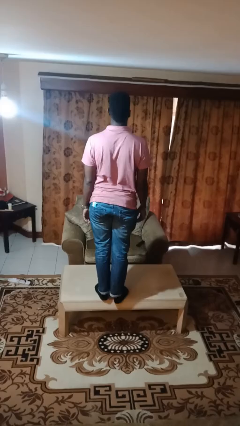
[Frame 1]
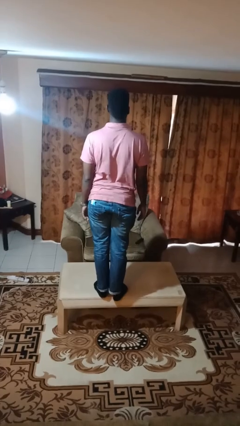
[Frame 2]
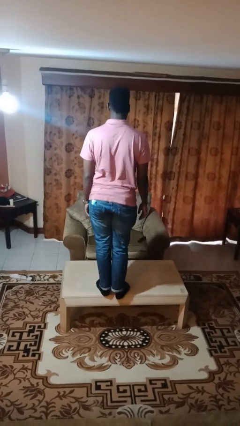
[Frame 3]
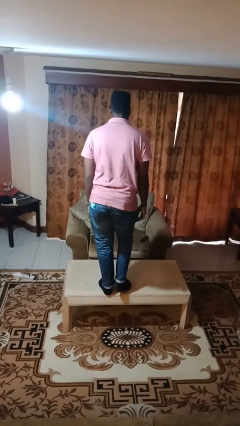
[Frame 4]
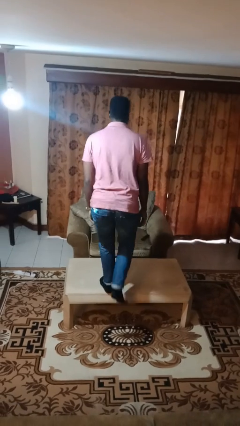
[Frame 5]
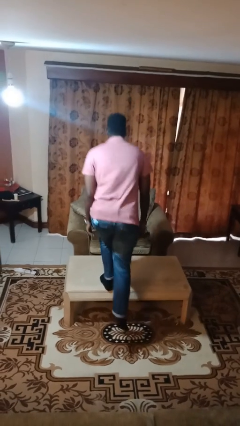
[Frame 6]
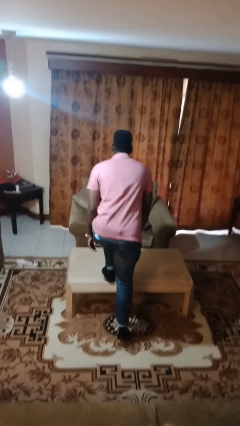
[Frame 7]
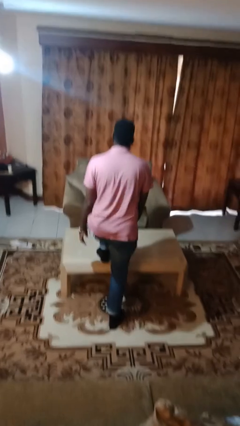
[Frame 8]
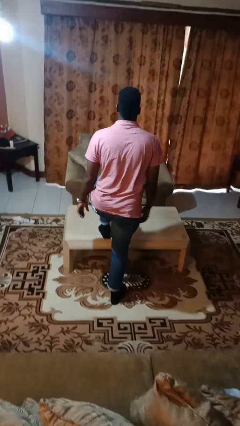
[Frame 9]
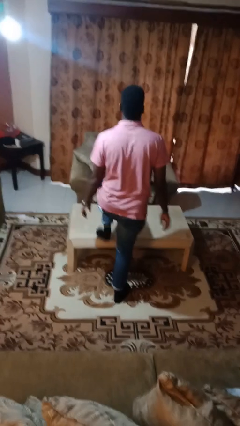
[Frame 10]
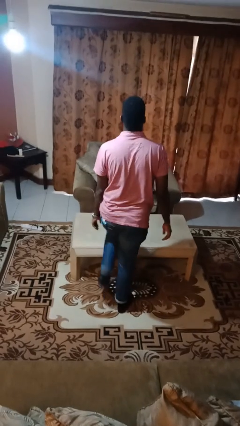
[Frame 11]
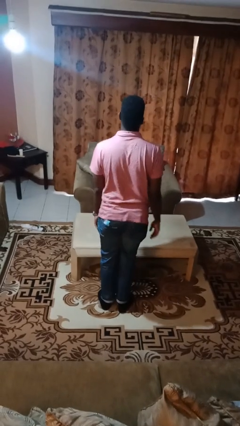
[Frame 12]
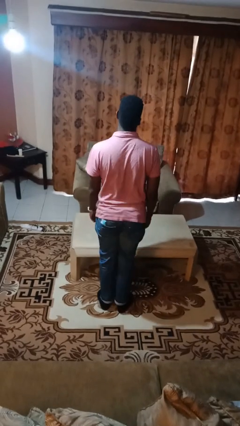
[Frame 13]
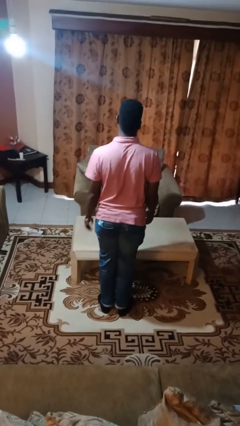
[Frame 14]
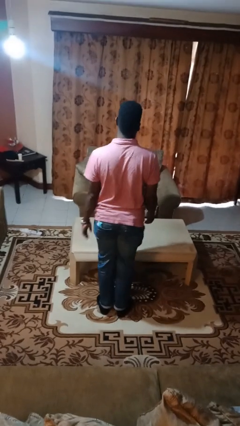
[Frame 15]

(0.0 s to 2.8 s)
person climbs off table

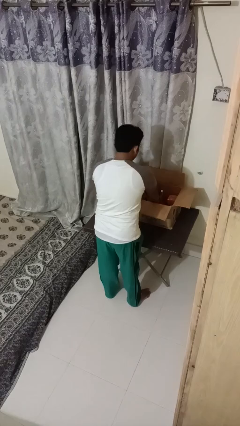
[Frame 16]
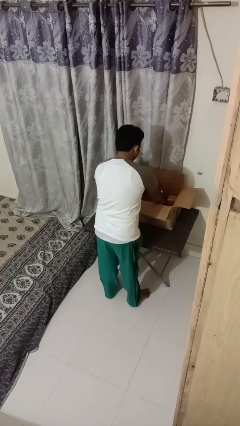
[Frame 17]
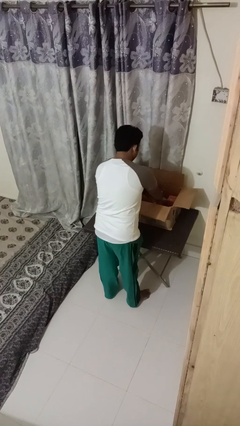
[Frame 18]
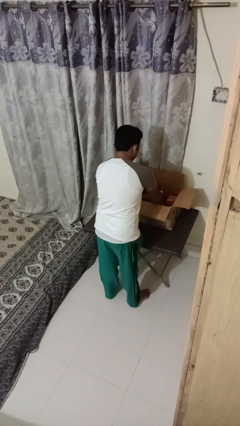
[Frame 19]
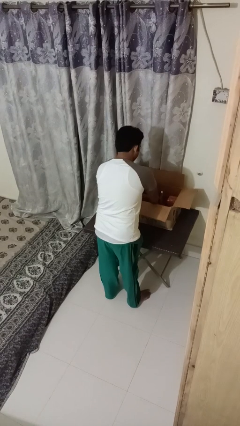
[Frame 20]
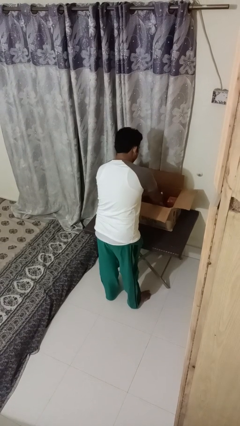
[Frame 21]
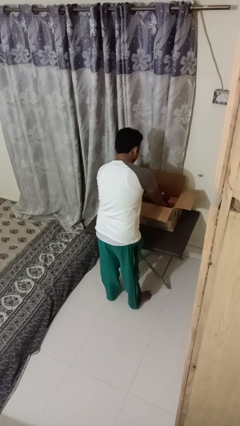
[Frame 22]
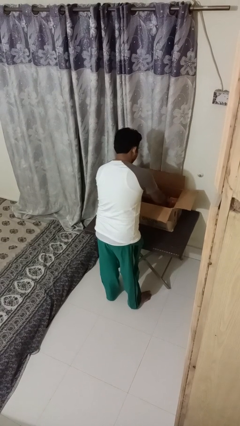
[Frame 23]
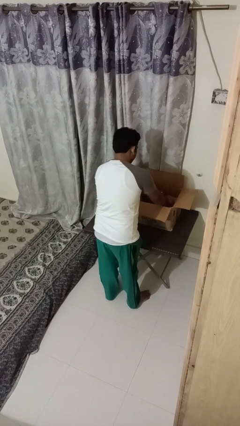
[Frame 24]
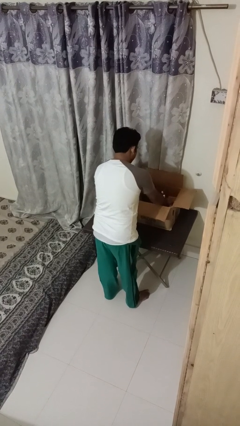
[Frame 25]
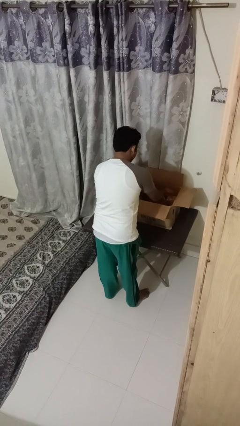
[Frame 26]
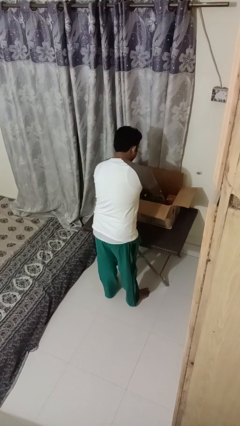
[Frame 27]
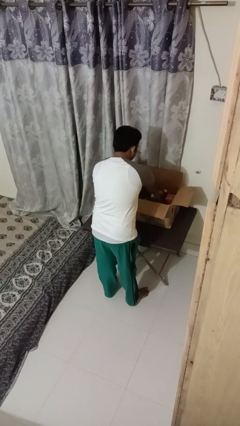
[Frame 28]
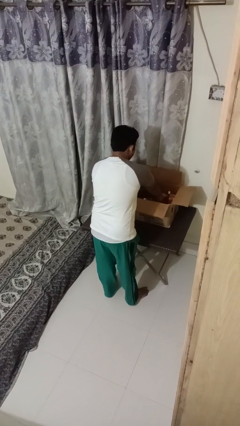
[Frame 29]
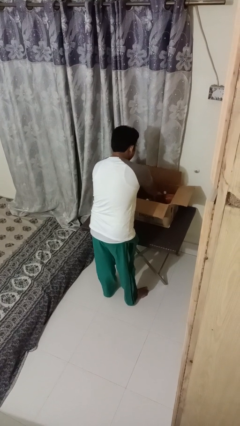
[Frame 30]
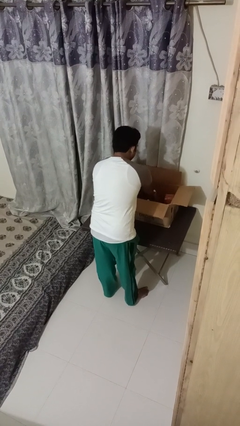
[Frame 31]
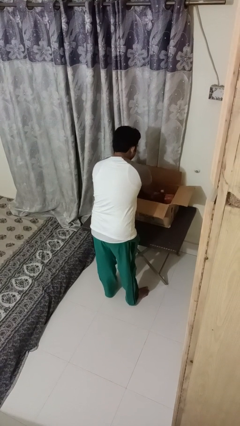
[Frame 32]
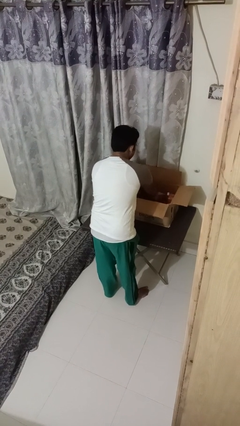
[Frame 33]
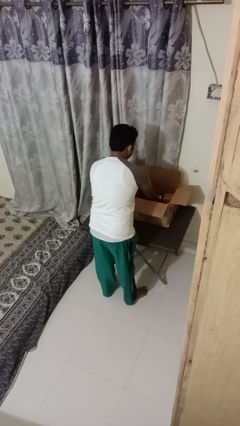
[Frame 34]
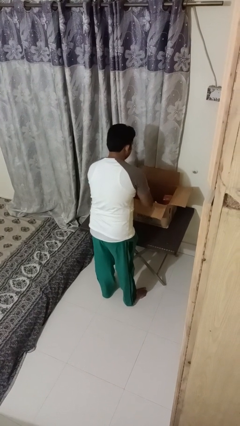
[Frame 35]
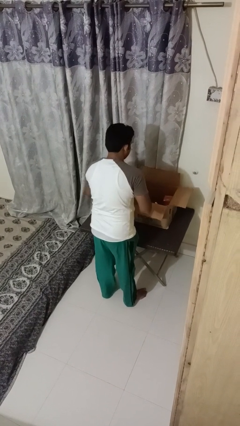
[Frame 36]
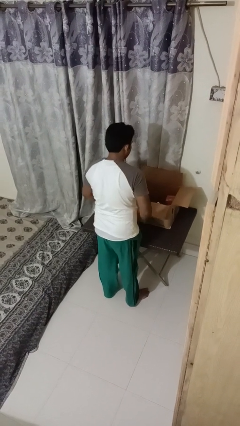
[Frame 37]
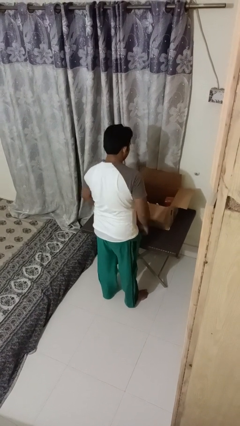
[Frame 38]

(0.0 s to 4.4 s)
person searches in box

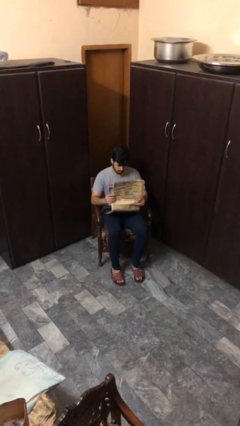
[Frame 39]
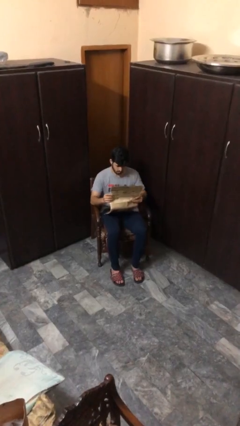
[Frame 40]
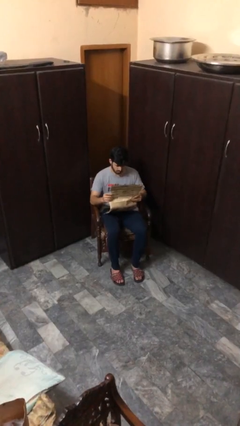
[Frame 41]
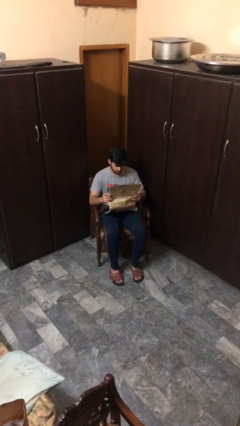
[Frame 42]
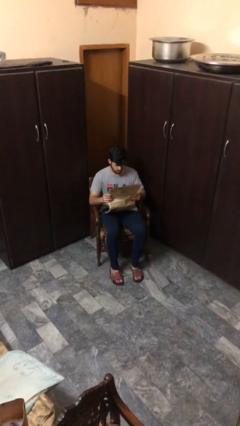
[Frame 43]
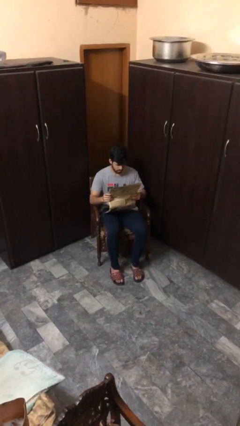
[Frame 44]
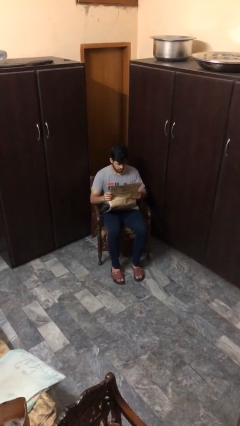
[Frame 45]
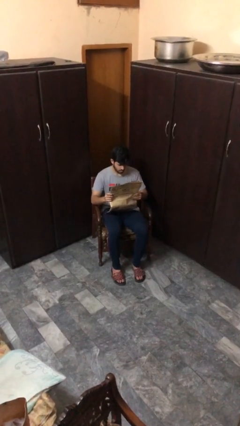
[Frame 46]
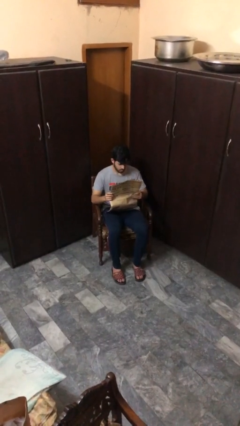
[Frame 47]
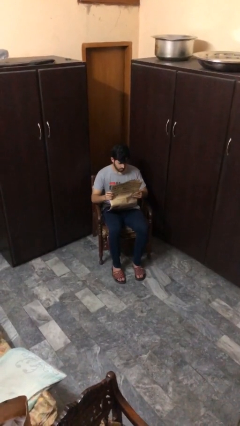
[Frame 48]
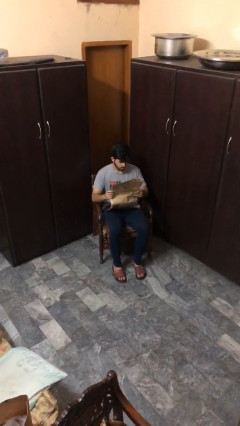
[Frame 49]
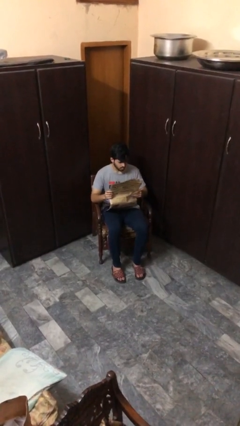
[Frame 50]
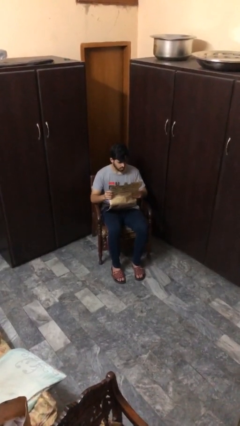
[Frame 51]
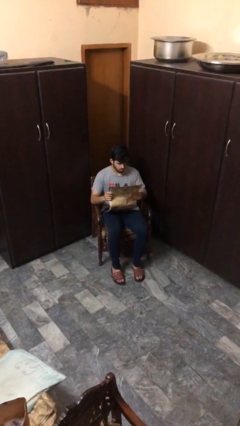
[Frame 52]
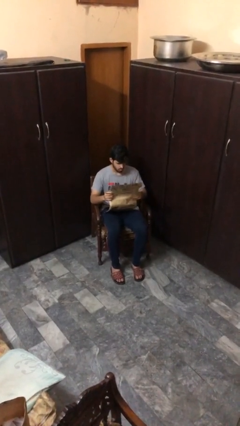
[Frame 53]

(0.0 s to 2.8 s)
person reads newspaper

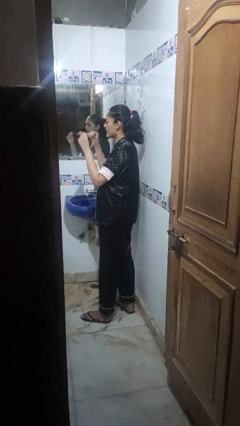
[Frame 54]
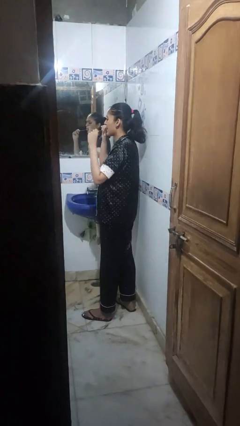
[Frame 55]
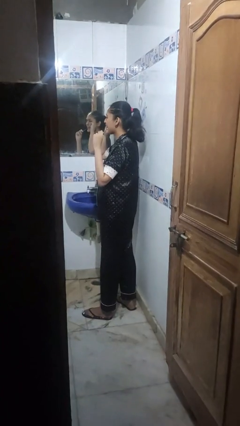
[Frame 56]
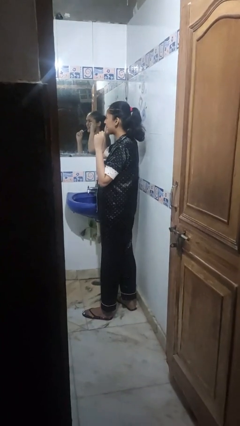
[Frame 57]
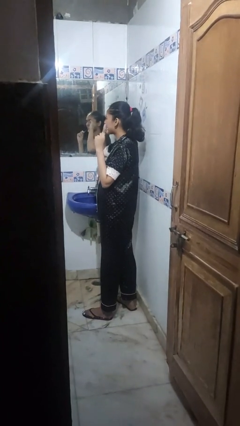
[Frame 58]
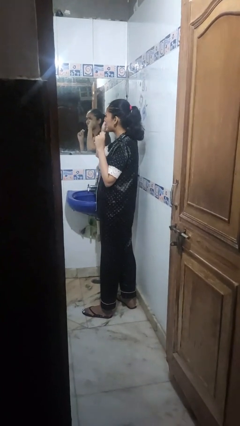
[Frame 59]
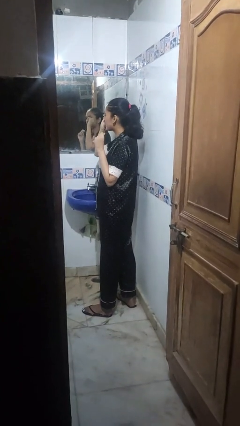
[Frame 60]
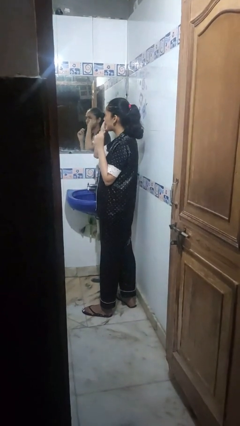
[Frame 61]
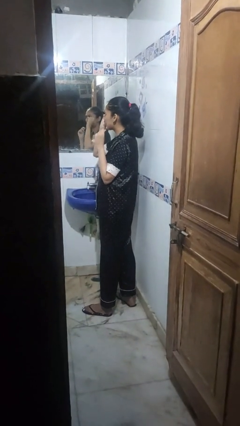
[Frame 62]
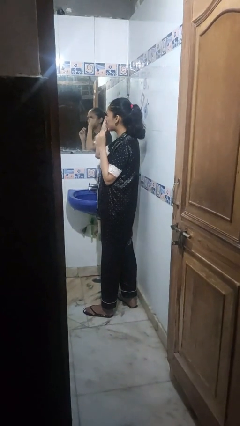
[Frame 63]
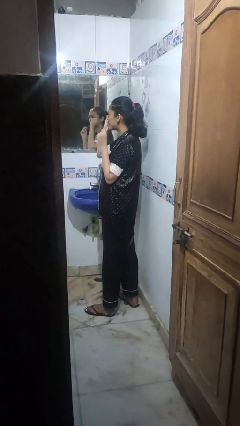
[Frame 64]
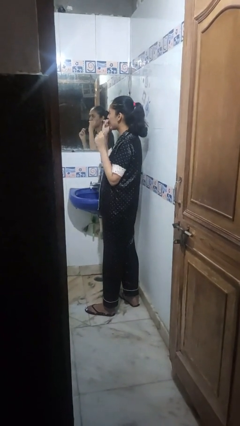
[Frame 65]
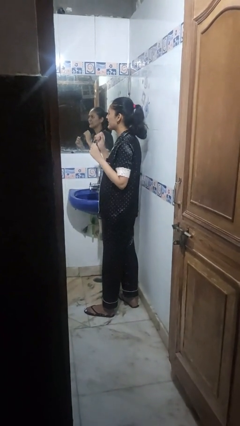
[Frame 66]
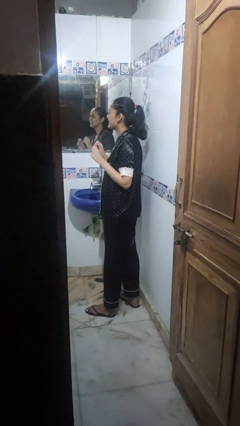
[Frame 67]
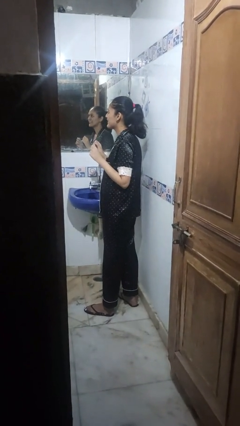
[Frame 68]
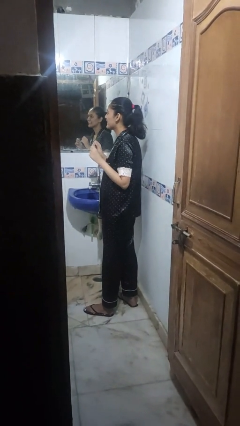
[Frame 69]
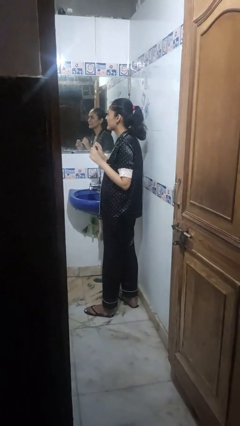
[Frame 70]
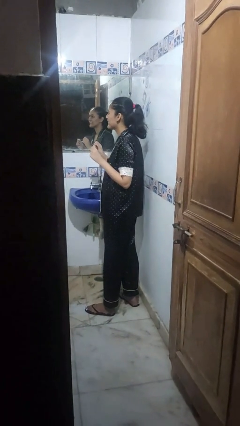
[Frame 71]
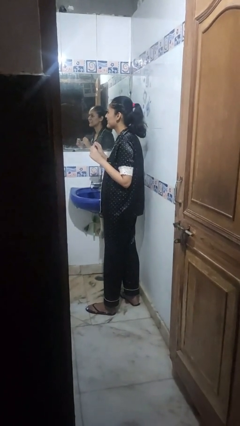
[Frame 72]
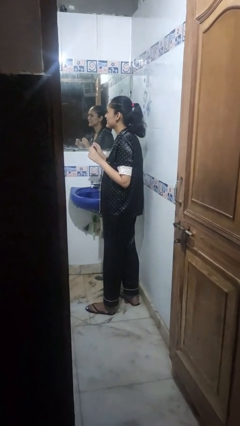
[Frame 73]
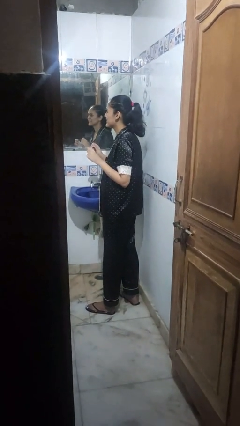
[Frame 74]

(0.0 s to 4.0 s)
person flosses

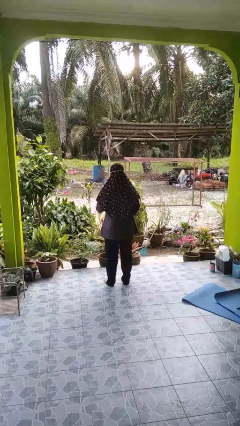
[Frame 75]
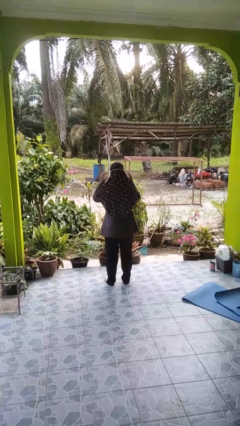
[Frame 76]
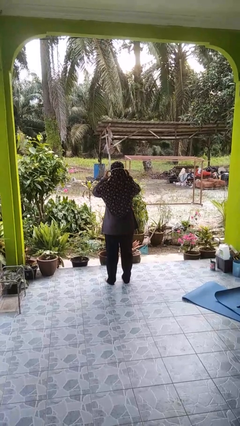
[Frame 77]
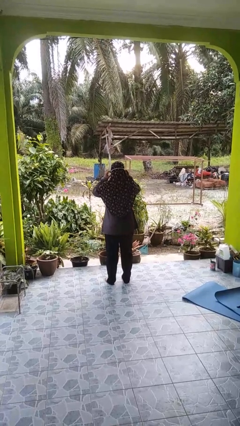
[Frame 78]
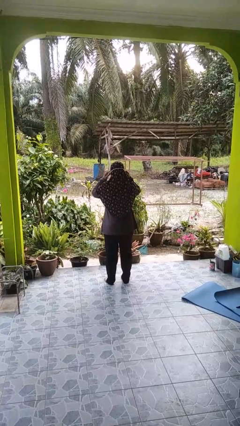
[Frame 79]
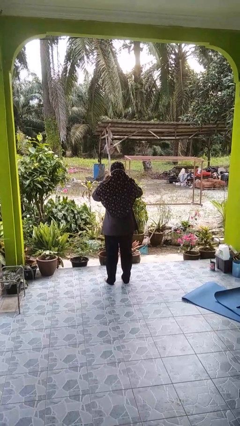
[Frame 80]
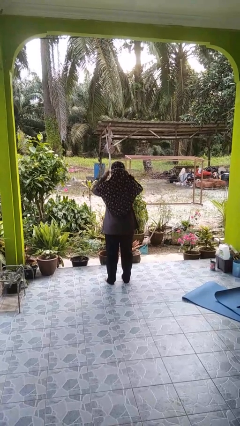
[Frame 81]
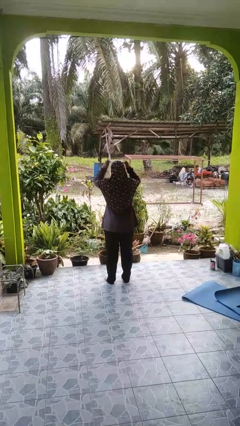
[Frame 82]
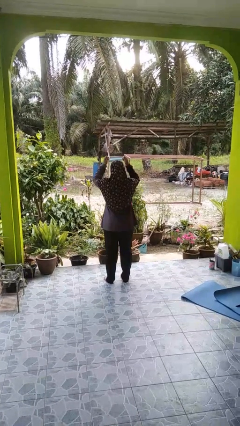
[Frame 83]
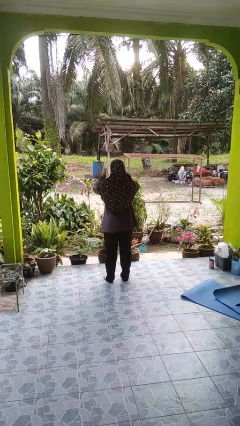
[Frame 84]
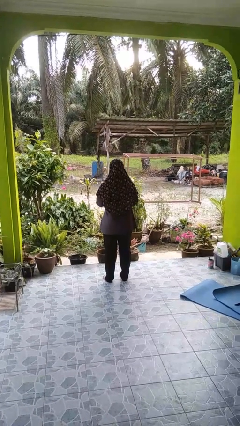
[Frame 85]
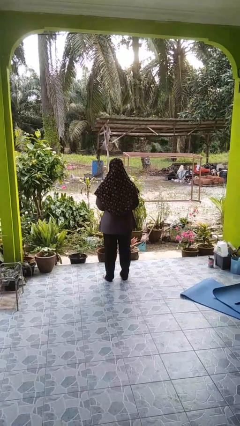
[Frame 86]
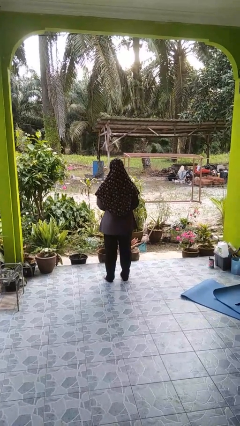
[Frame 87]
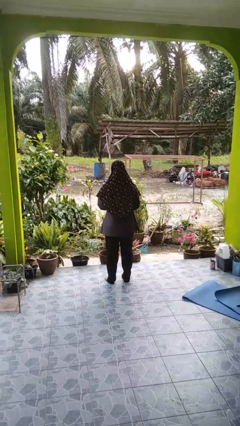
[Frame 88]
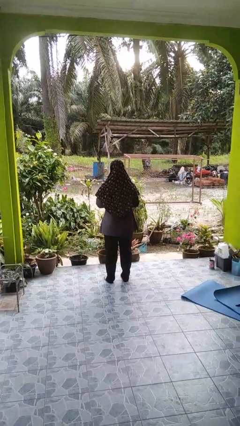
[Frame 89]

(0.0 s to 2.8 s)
person takes off facemask

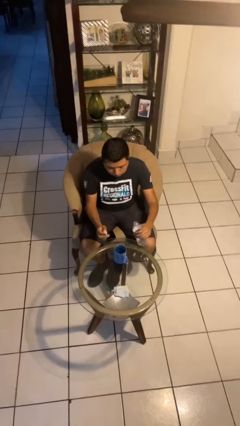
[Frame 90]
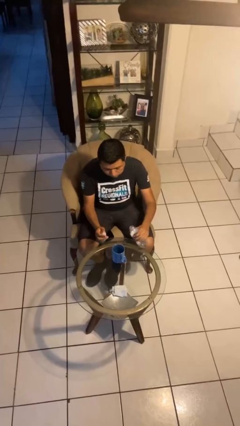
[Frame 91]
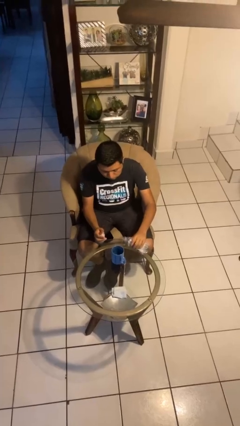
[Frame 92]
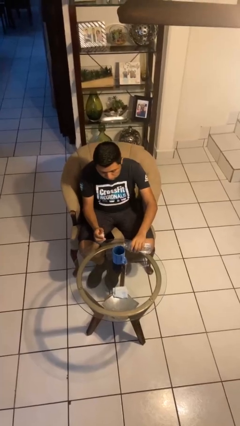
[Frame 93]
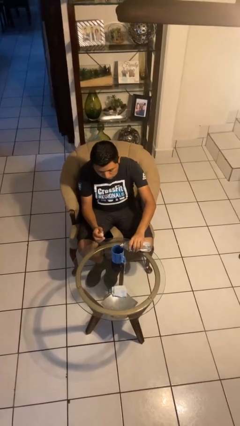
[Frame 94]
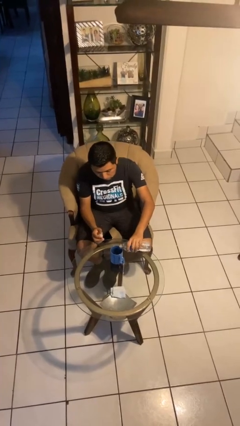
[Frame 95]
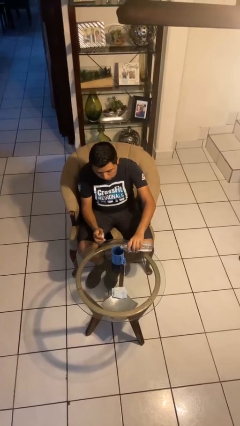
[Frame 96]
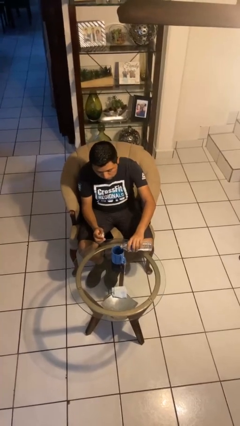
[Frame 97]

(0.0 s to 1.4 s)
person pours liquid into cup
